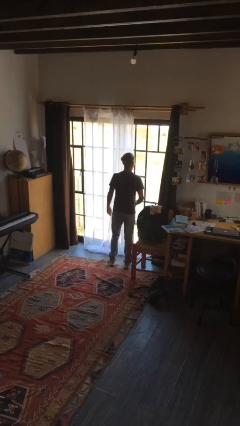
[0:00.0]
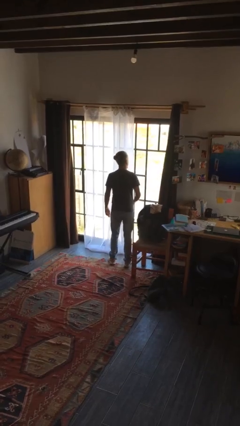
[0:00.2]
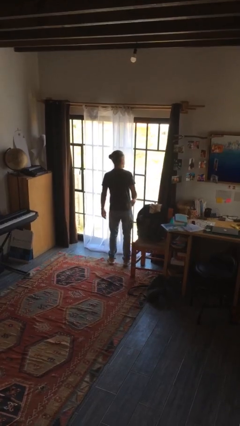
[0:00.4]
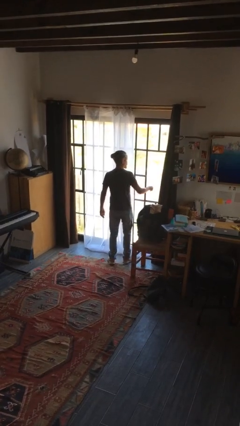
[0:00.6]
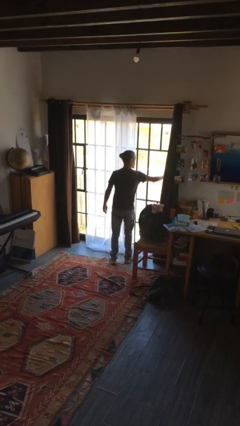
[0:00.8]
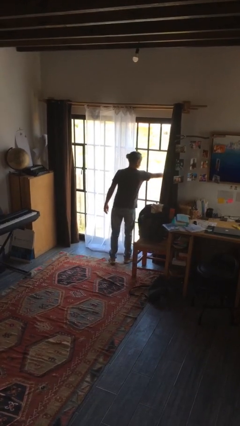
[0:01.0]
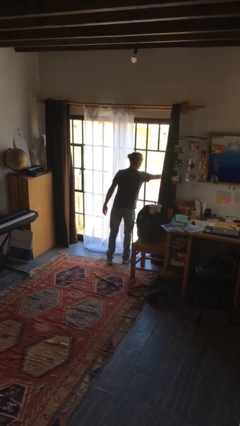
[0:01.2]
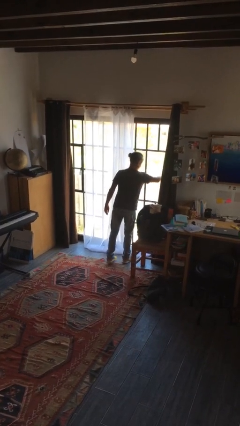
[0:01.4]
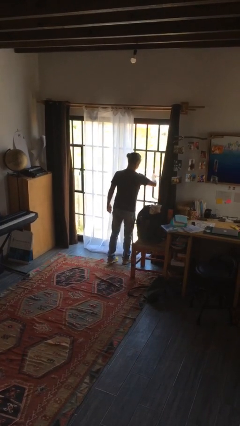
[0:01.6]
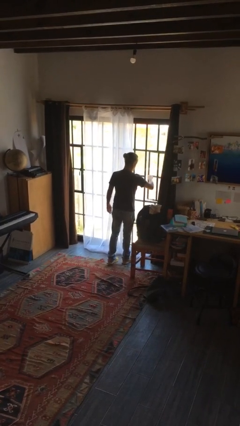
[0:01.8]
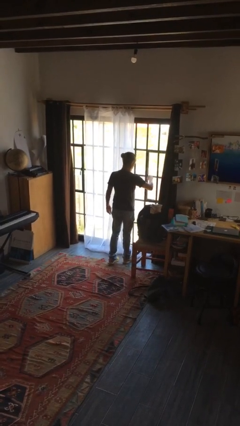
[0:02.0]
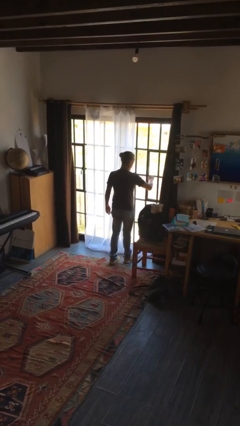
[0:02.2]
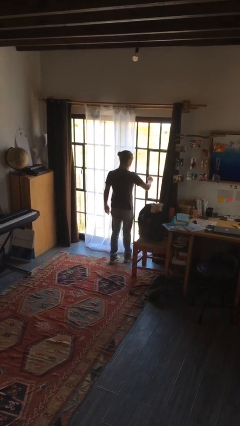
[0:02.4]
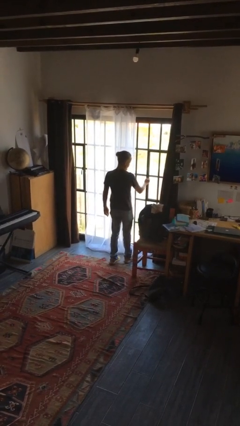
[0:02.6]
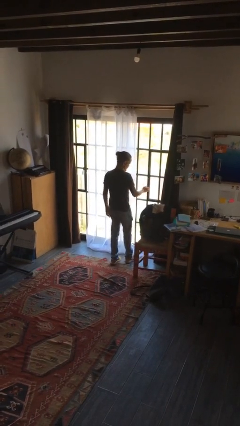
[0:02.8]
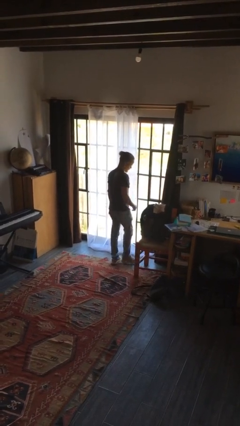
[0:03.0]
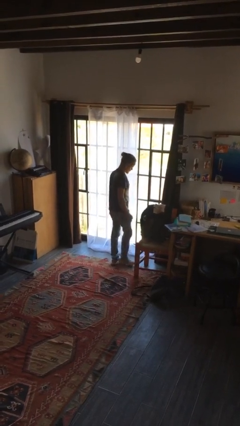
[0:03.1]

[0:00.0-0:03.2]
person closes home window

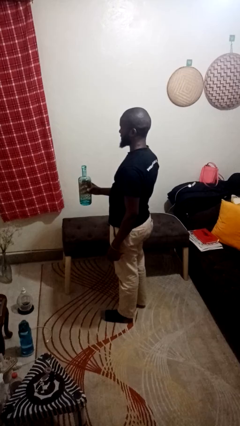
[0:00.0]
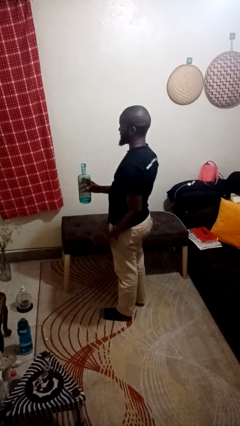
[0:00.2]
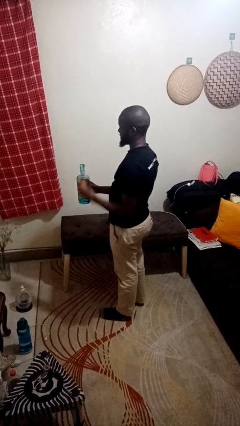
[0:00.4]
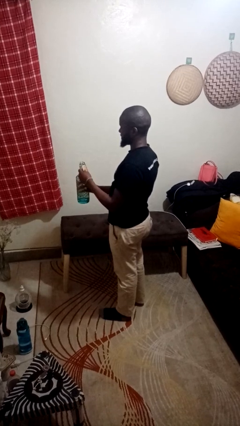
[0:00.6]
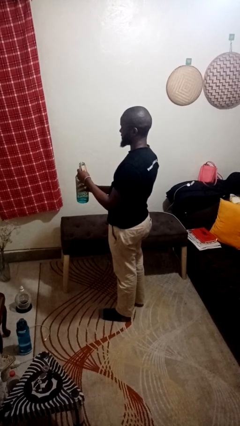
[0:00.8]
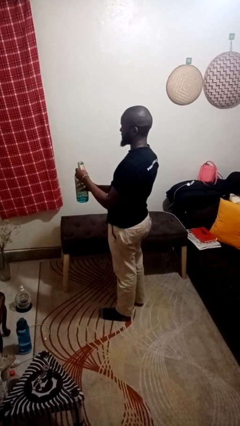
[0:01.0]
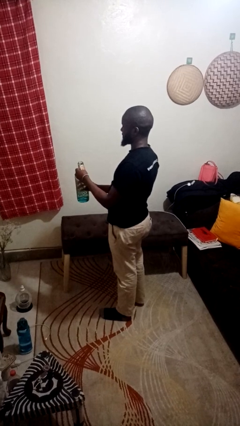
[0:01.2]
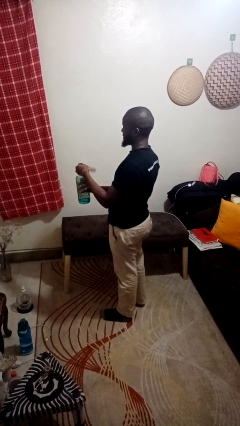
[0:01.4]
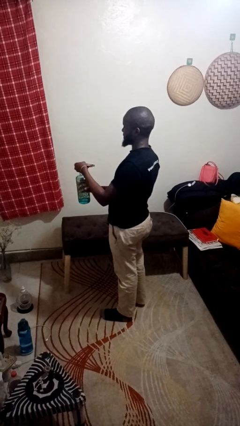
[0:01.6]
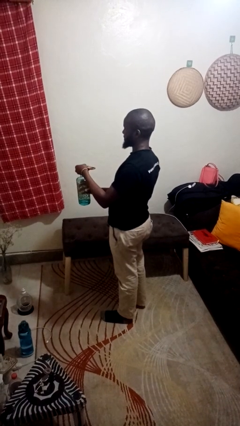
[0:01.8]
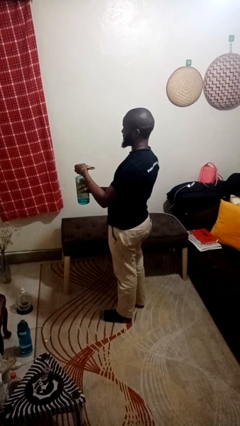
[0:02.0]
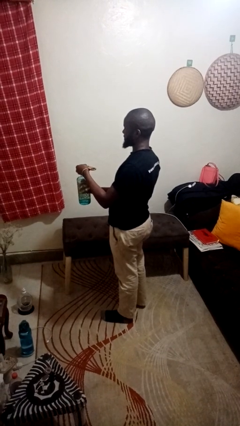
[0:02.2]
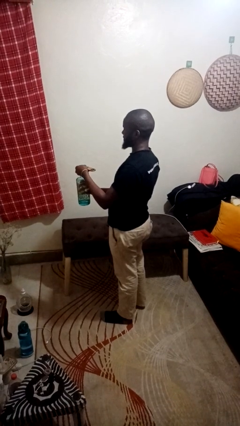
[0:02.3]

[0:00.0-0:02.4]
person opens can with can opener

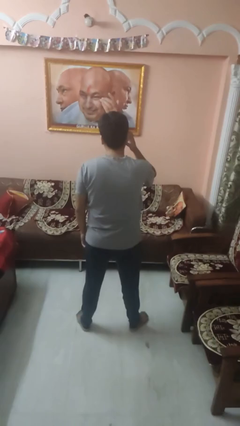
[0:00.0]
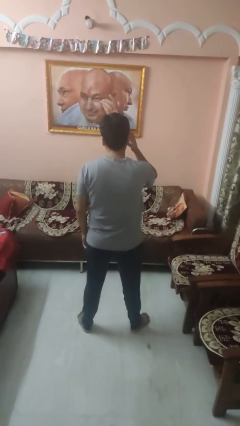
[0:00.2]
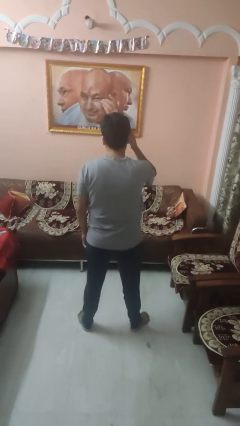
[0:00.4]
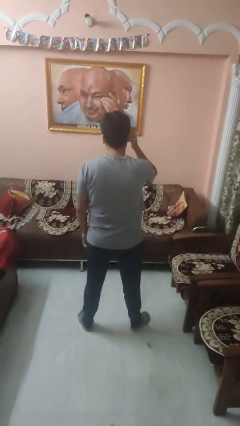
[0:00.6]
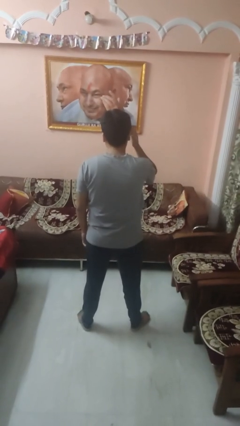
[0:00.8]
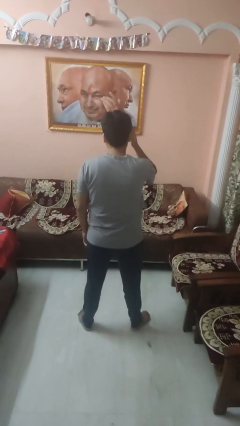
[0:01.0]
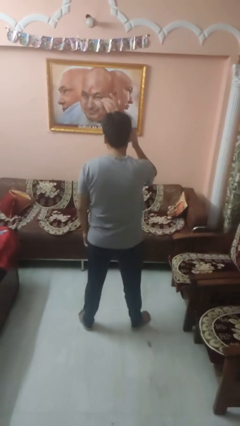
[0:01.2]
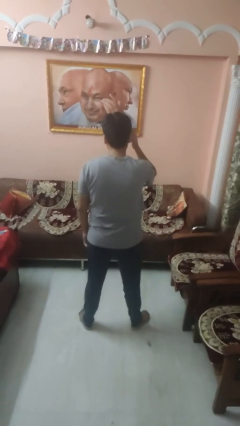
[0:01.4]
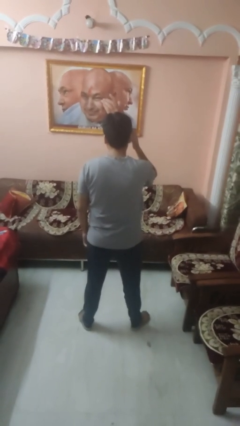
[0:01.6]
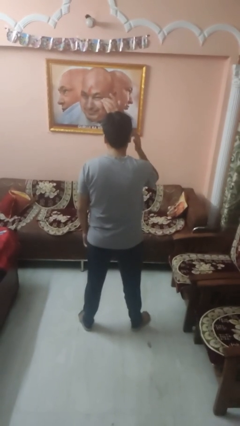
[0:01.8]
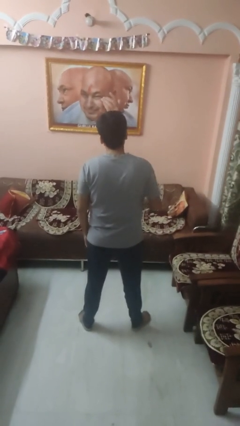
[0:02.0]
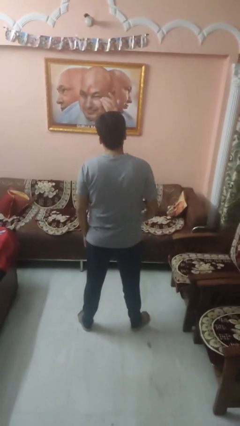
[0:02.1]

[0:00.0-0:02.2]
person scratches face

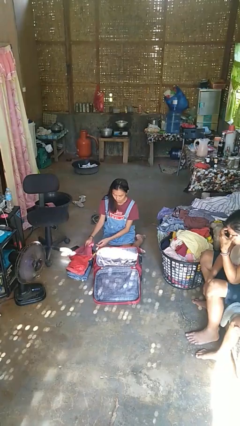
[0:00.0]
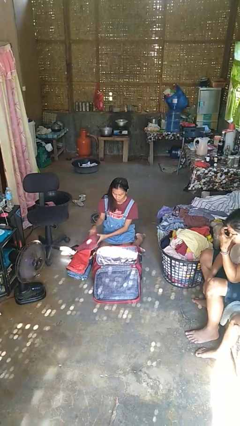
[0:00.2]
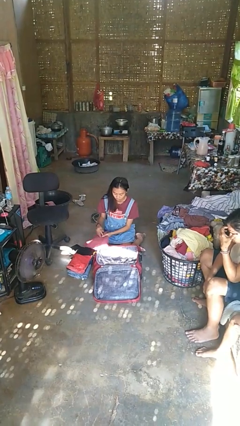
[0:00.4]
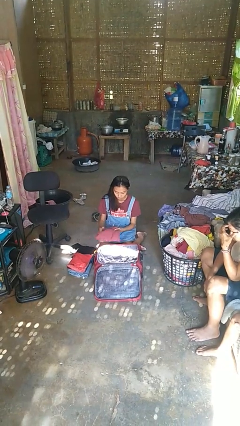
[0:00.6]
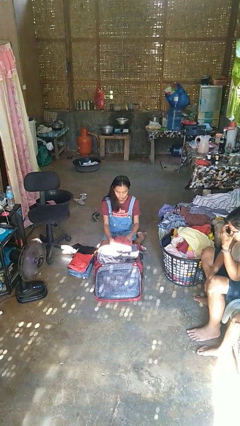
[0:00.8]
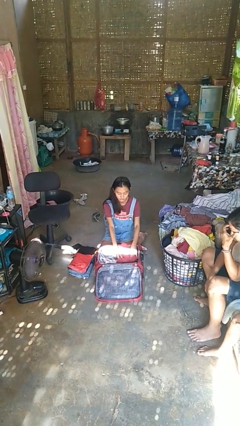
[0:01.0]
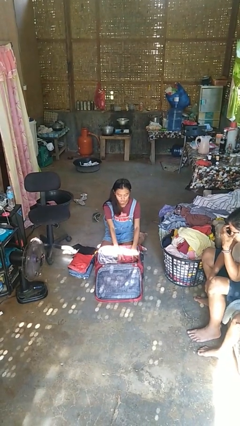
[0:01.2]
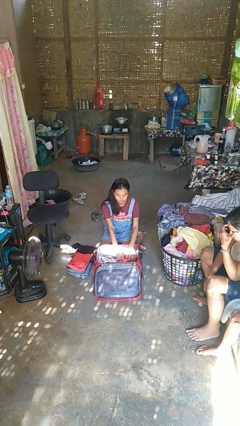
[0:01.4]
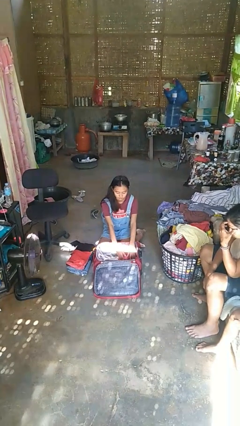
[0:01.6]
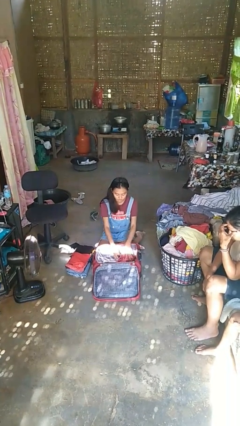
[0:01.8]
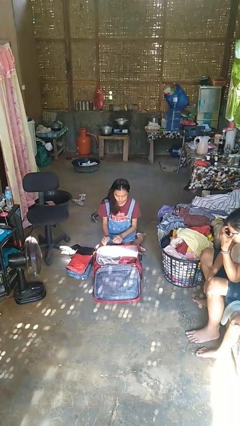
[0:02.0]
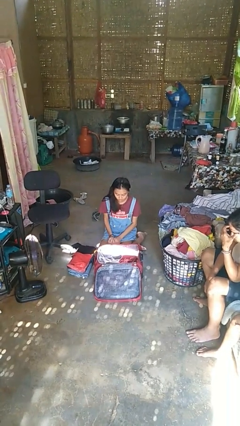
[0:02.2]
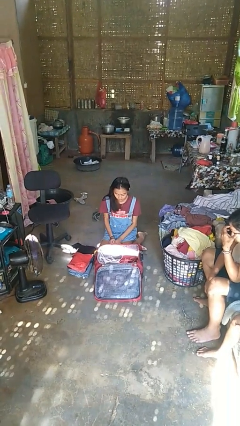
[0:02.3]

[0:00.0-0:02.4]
person loads clothes into suitcase

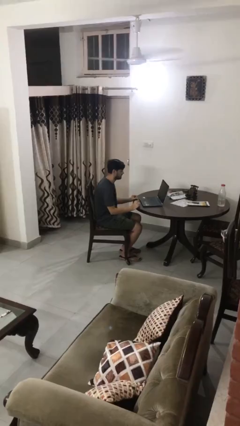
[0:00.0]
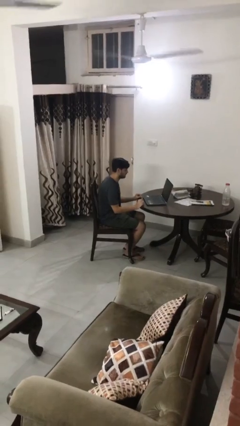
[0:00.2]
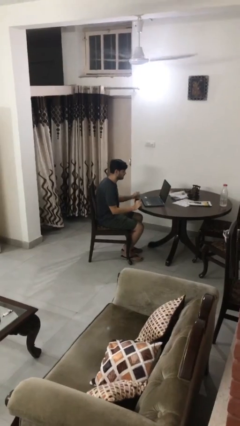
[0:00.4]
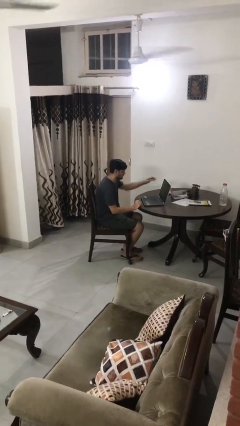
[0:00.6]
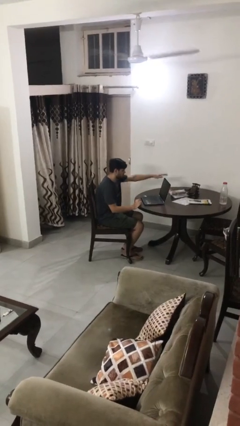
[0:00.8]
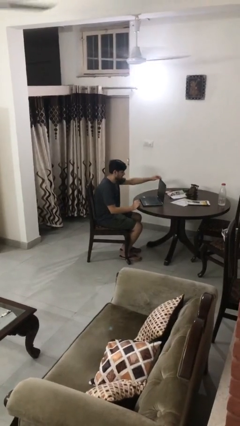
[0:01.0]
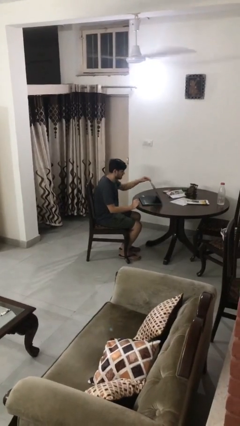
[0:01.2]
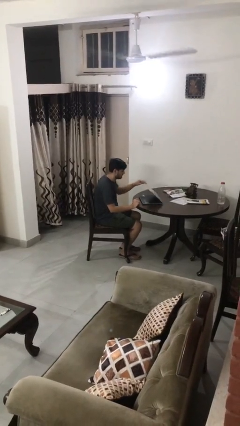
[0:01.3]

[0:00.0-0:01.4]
person closes laptop

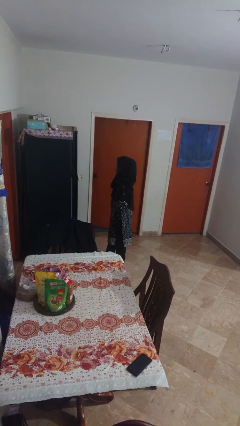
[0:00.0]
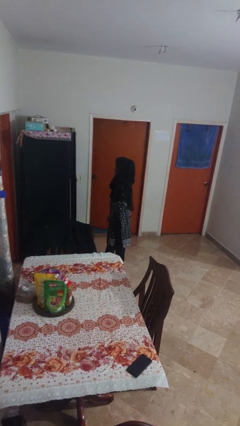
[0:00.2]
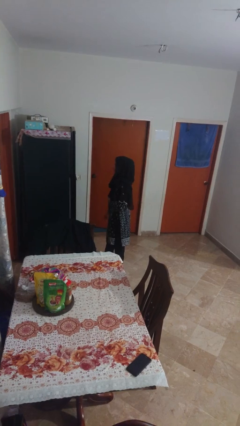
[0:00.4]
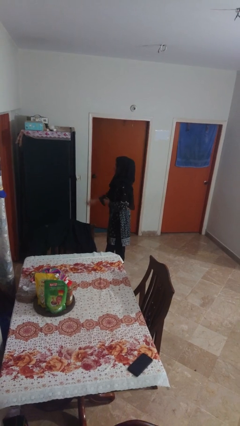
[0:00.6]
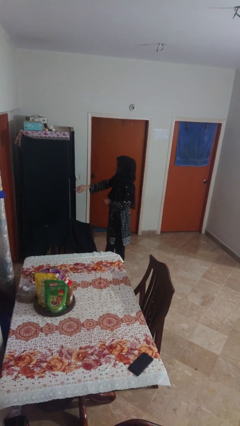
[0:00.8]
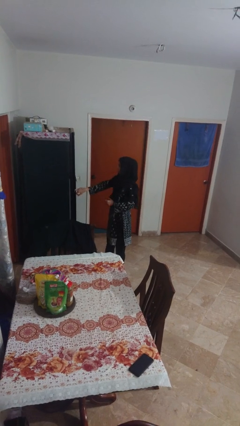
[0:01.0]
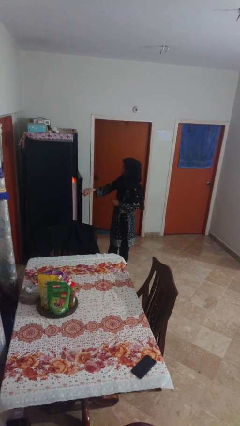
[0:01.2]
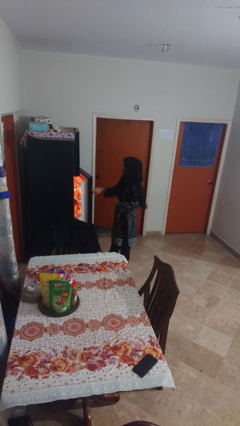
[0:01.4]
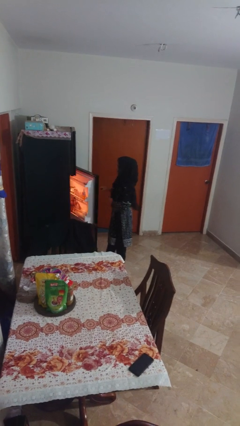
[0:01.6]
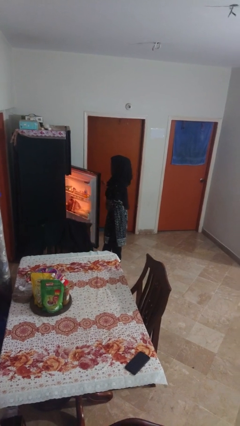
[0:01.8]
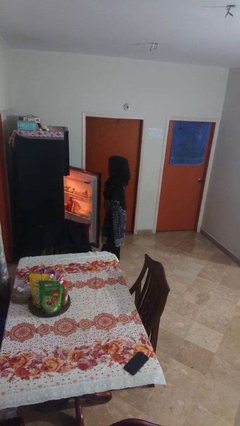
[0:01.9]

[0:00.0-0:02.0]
person opens refrigerator

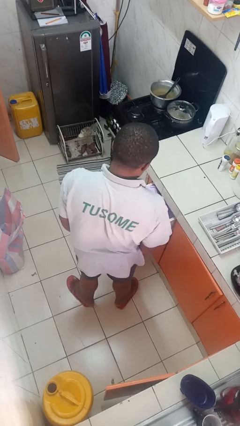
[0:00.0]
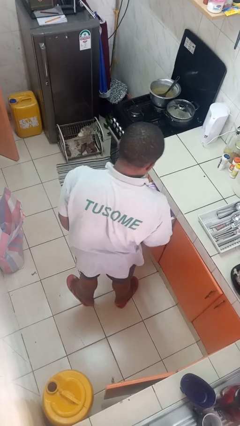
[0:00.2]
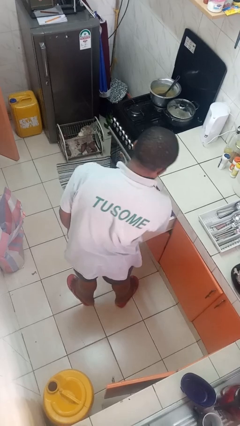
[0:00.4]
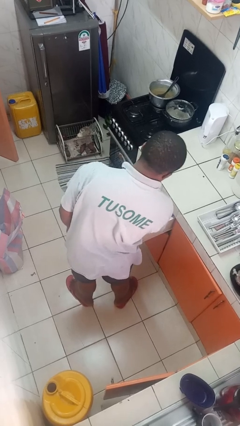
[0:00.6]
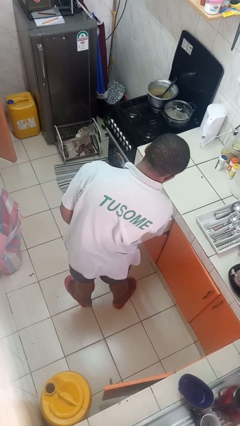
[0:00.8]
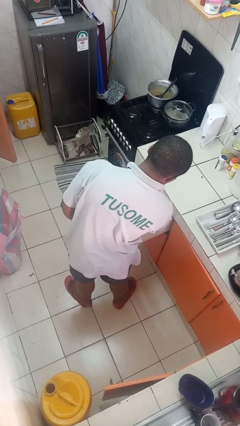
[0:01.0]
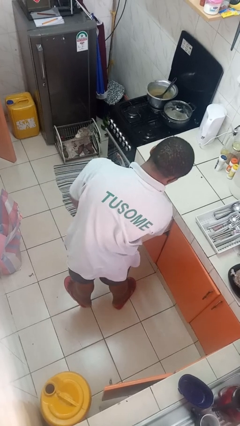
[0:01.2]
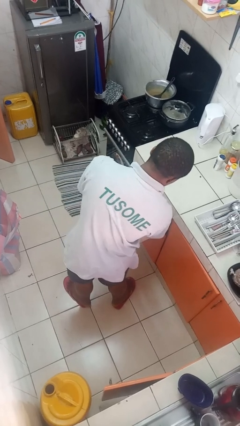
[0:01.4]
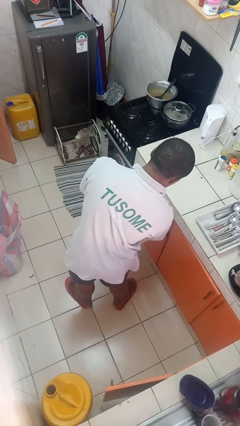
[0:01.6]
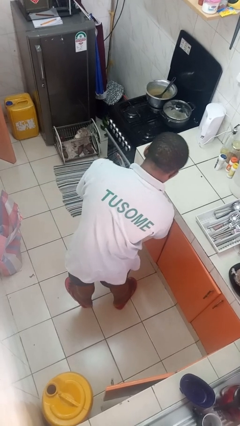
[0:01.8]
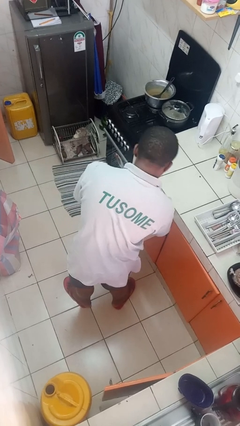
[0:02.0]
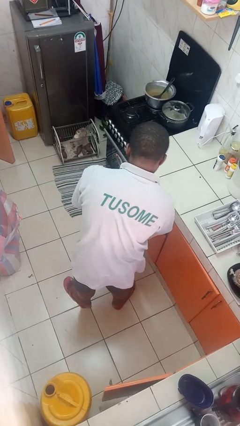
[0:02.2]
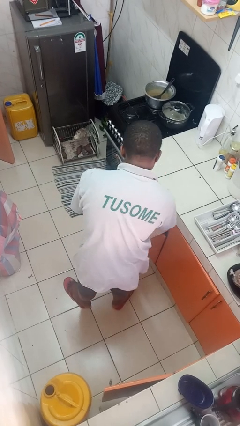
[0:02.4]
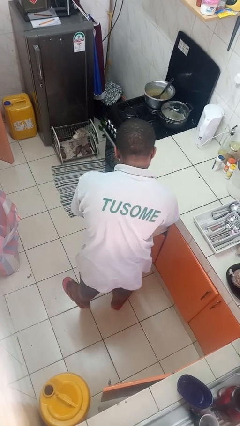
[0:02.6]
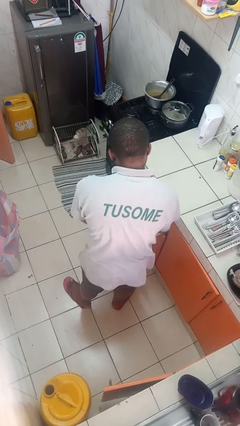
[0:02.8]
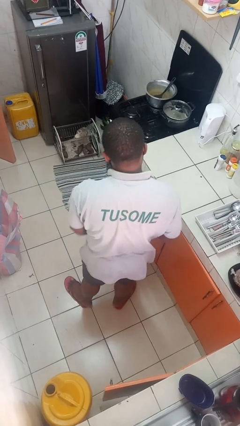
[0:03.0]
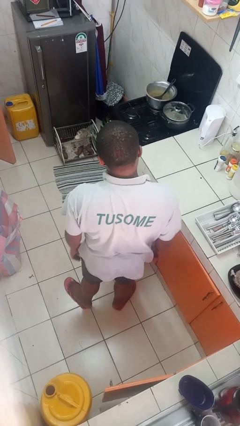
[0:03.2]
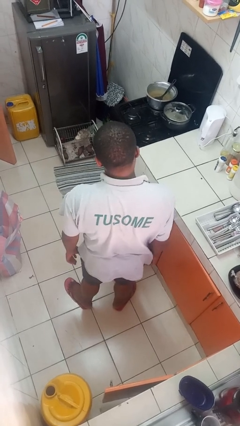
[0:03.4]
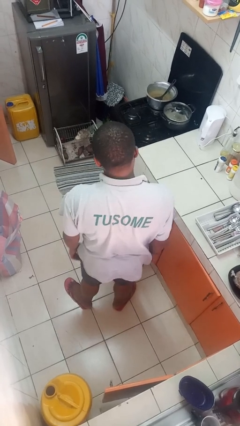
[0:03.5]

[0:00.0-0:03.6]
person searches in kitchen drawer
